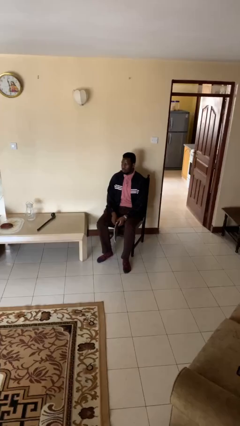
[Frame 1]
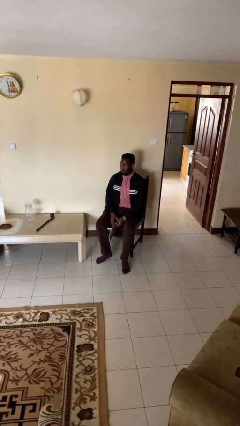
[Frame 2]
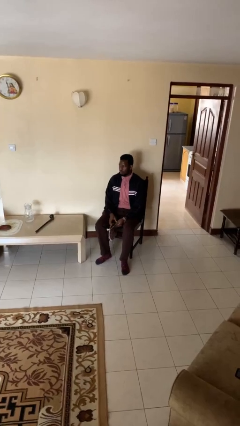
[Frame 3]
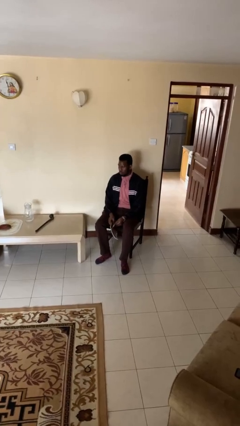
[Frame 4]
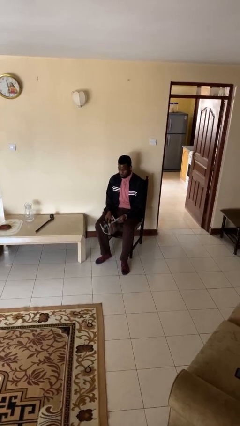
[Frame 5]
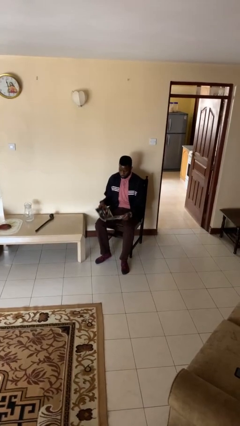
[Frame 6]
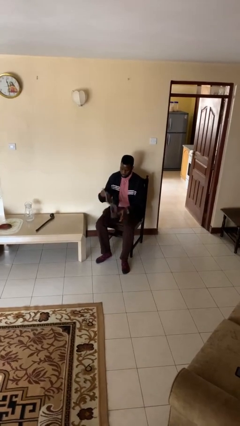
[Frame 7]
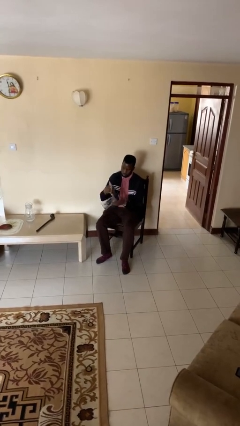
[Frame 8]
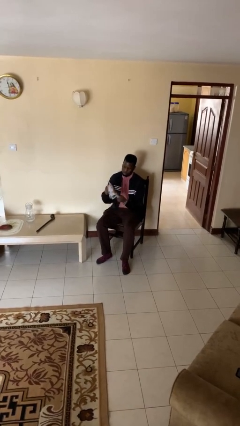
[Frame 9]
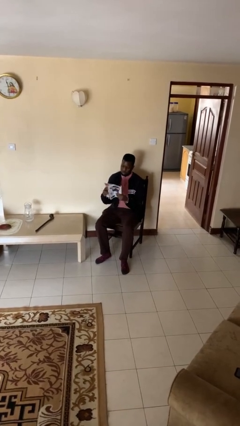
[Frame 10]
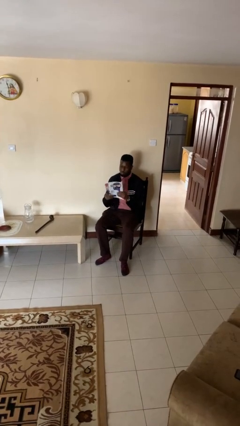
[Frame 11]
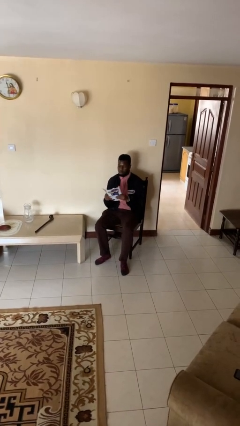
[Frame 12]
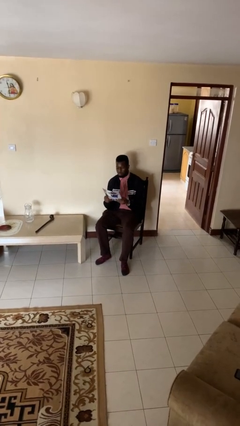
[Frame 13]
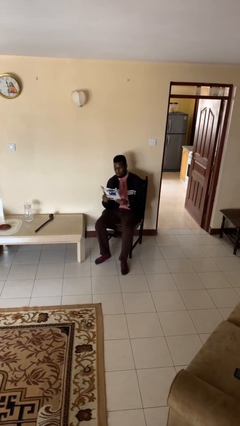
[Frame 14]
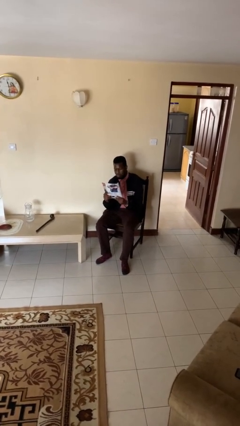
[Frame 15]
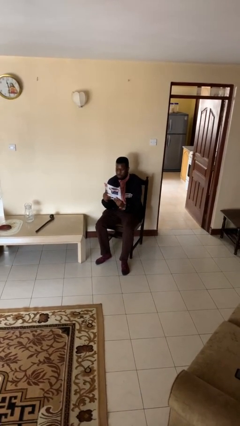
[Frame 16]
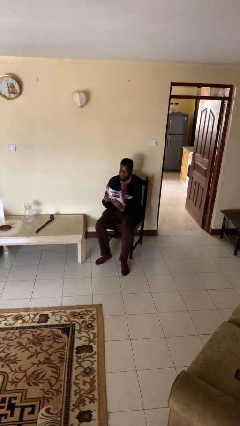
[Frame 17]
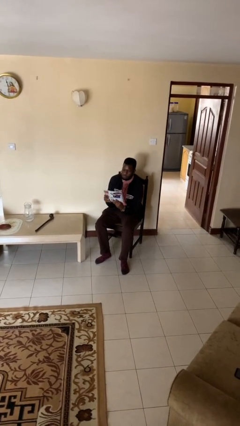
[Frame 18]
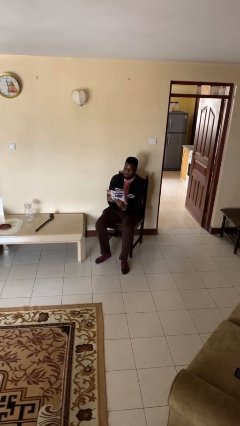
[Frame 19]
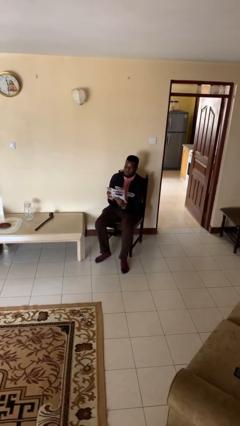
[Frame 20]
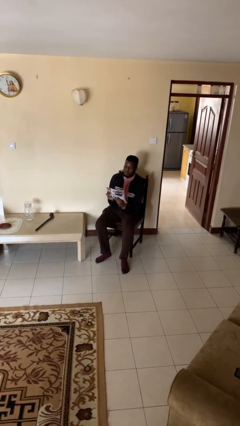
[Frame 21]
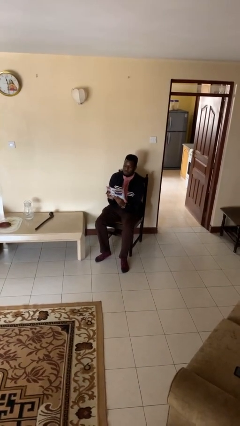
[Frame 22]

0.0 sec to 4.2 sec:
person reads document

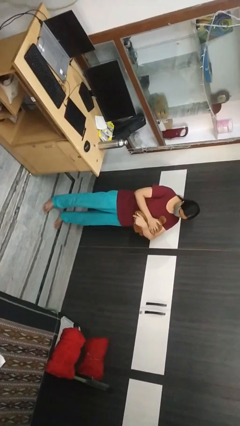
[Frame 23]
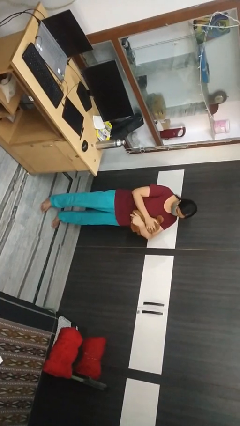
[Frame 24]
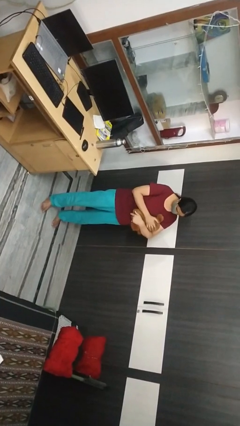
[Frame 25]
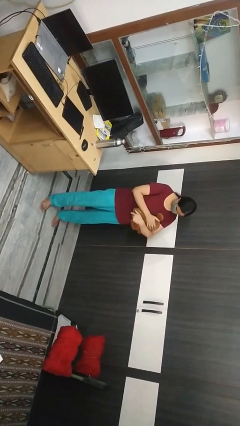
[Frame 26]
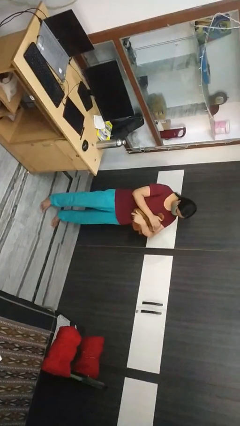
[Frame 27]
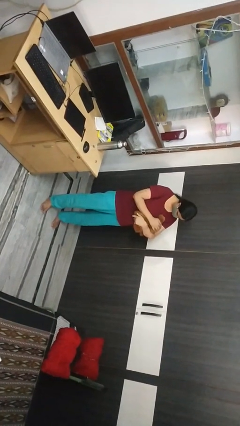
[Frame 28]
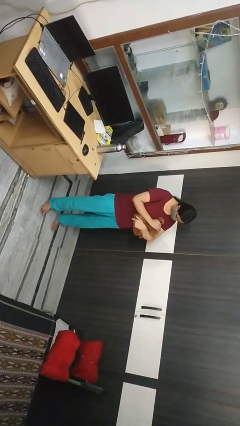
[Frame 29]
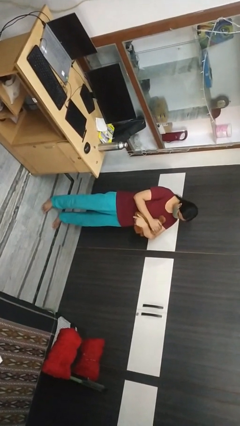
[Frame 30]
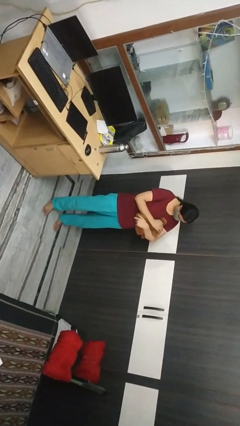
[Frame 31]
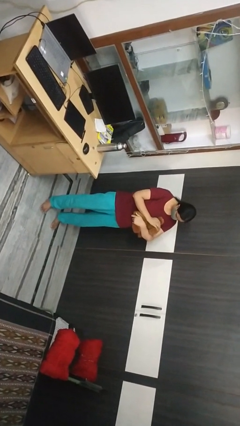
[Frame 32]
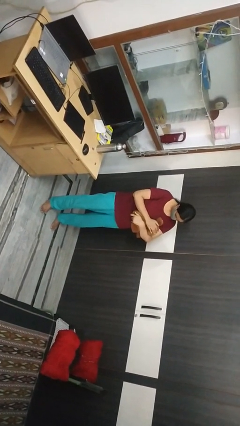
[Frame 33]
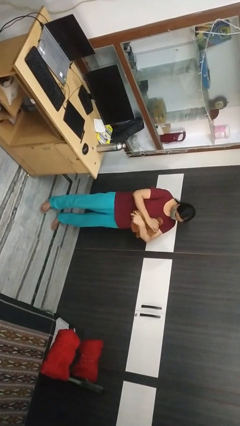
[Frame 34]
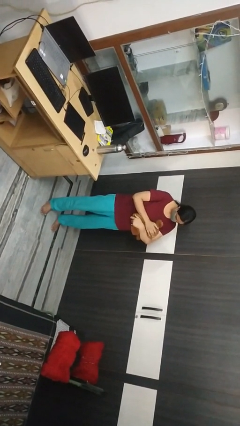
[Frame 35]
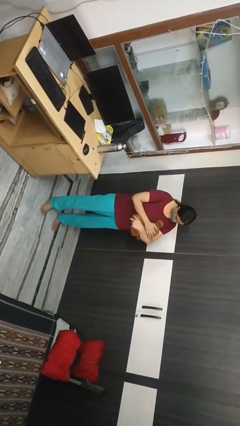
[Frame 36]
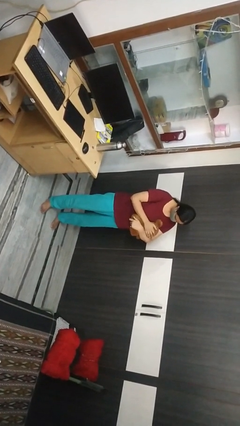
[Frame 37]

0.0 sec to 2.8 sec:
person pets cat

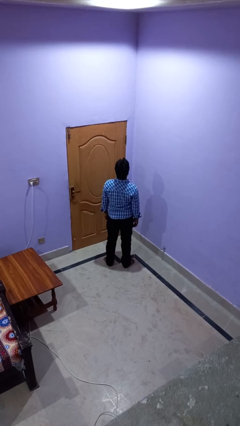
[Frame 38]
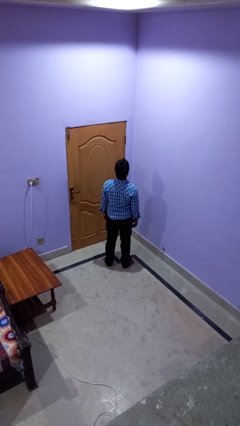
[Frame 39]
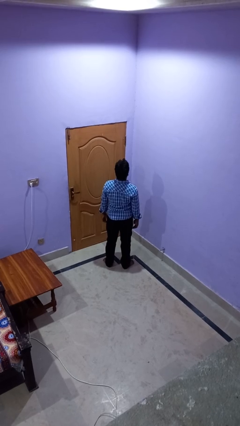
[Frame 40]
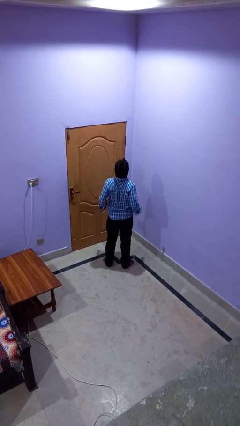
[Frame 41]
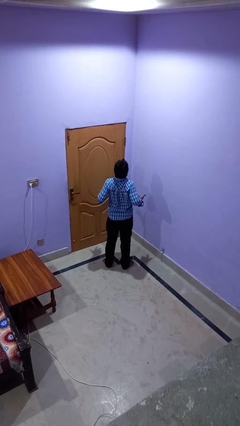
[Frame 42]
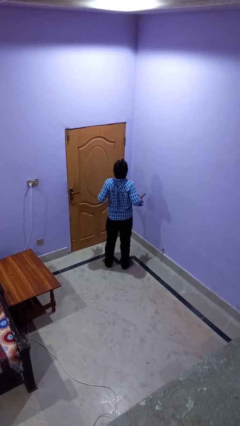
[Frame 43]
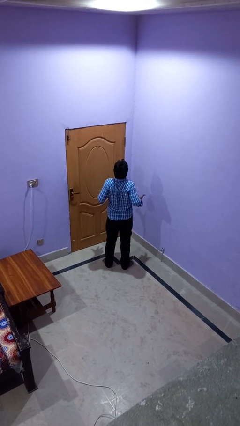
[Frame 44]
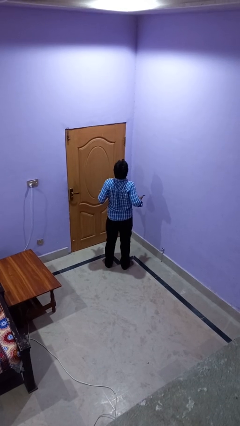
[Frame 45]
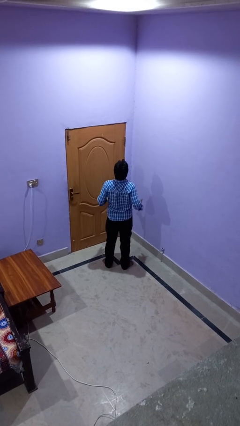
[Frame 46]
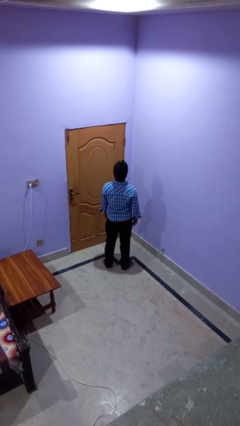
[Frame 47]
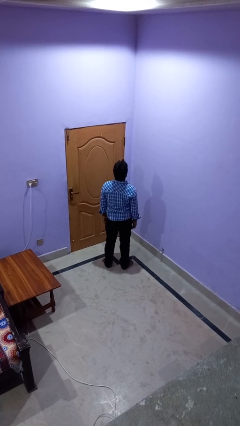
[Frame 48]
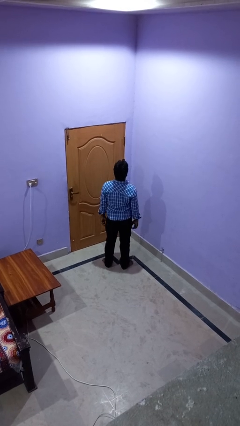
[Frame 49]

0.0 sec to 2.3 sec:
person shrugs

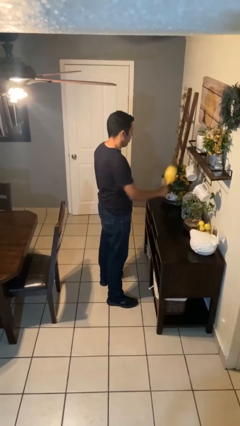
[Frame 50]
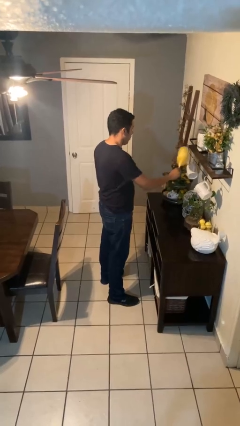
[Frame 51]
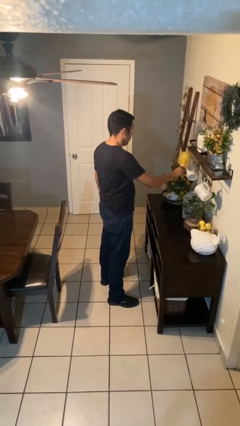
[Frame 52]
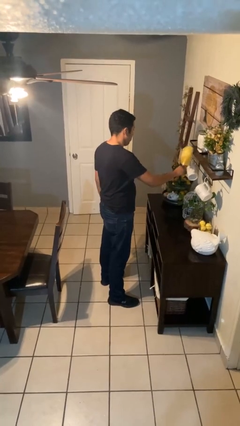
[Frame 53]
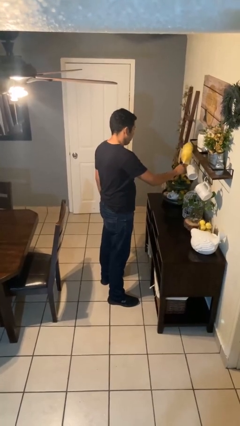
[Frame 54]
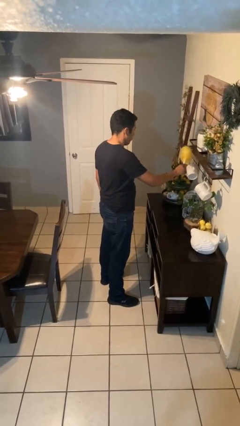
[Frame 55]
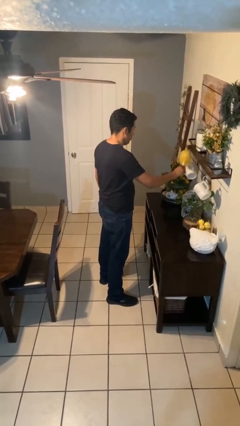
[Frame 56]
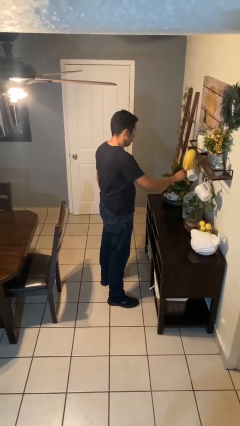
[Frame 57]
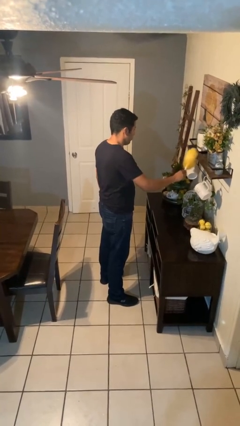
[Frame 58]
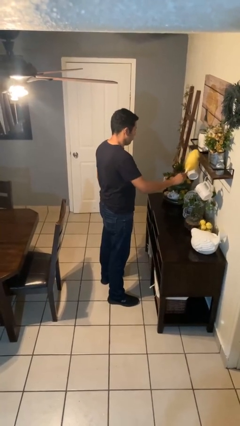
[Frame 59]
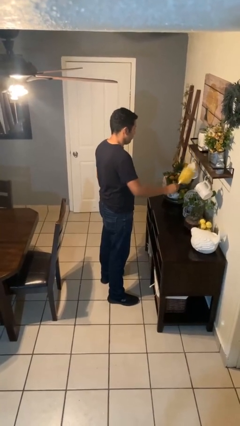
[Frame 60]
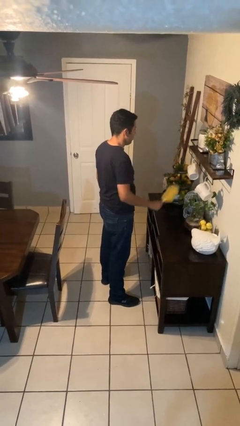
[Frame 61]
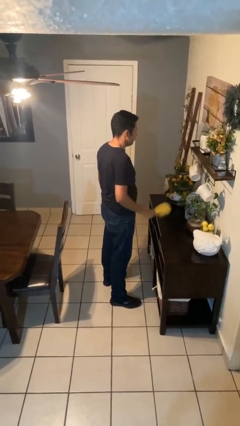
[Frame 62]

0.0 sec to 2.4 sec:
person dusts furniture

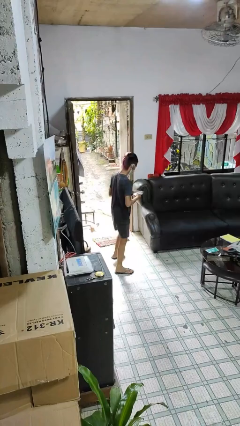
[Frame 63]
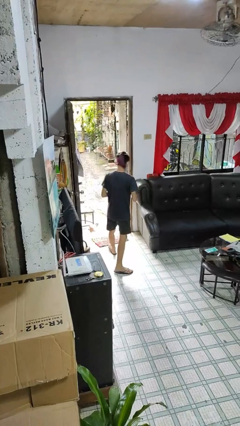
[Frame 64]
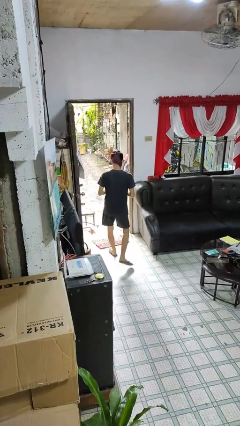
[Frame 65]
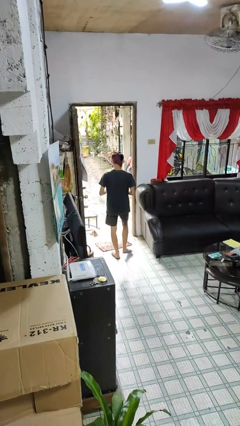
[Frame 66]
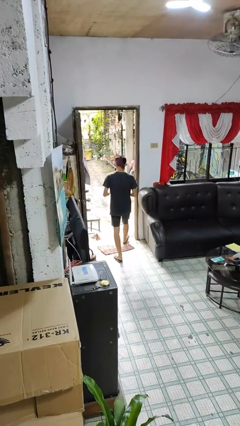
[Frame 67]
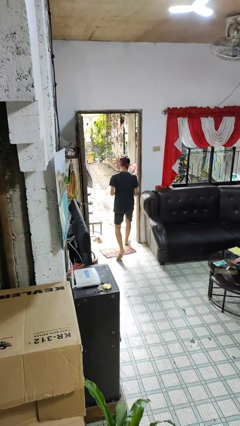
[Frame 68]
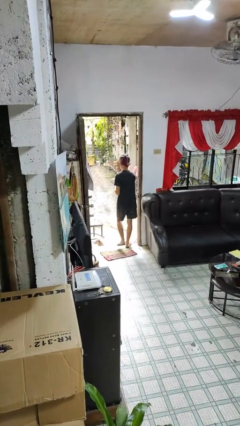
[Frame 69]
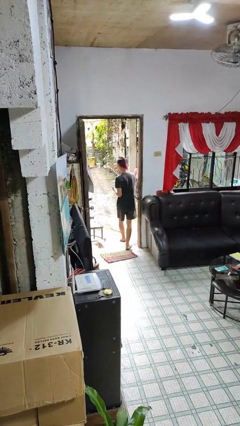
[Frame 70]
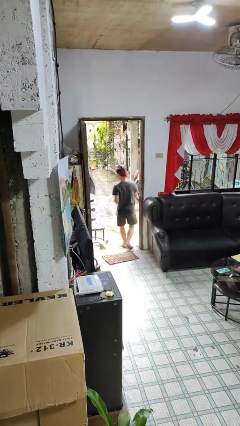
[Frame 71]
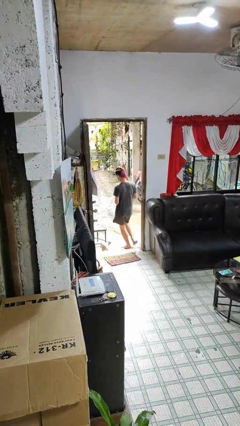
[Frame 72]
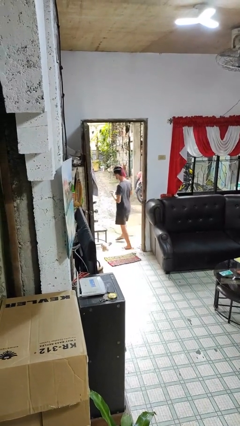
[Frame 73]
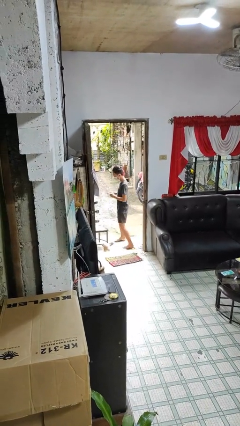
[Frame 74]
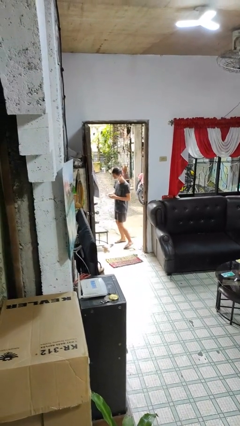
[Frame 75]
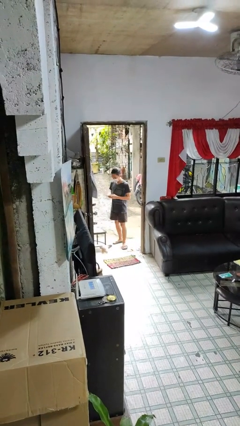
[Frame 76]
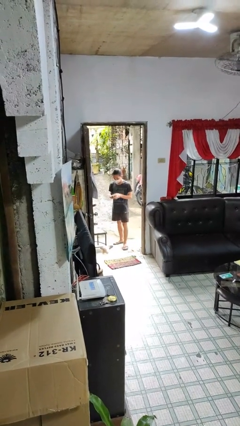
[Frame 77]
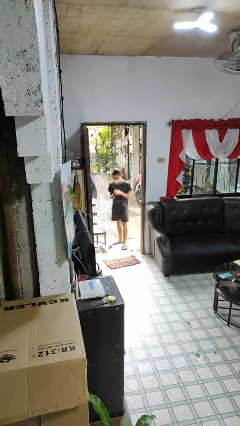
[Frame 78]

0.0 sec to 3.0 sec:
person exits scene through structure

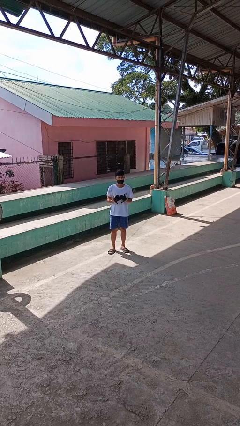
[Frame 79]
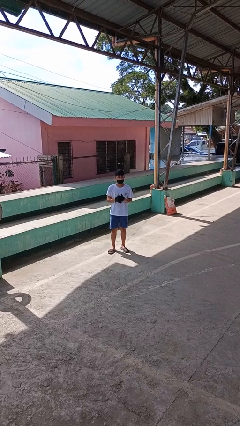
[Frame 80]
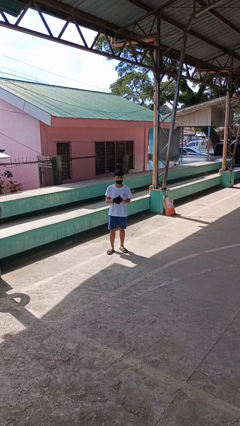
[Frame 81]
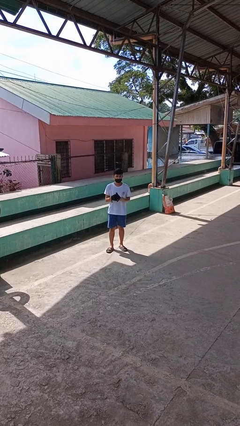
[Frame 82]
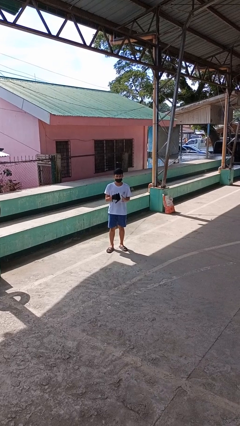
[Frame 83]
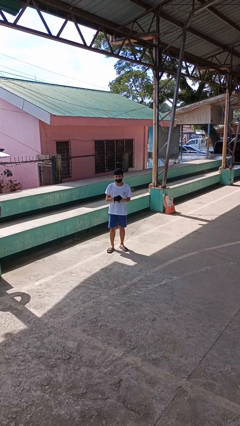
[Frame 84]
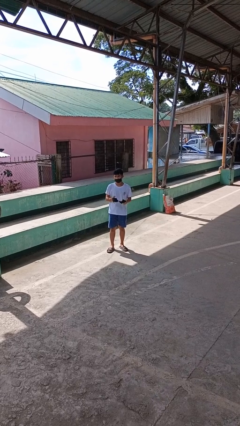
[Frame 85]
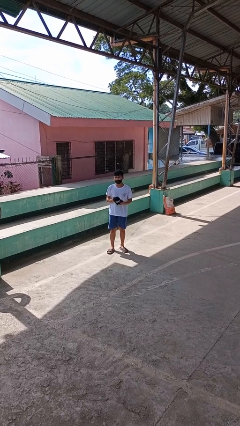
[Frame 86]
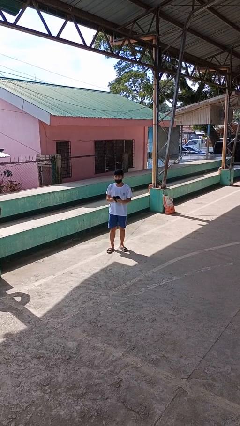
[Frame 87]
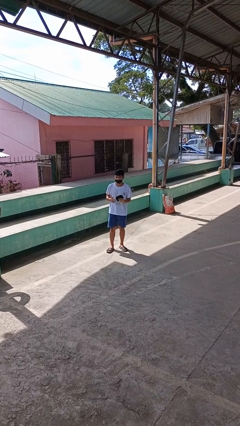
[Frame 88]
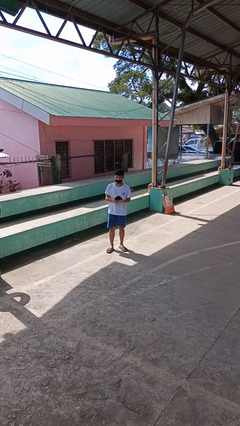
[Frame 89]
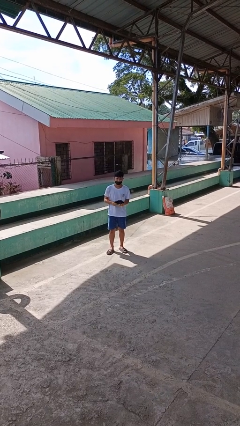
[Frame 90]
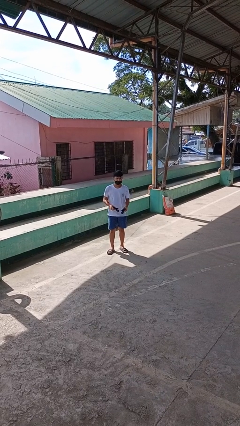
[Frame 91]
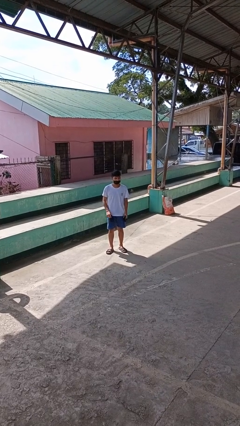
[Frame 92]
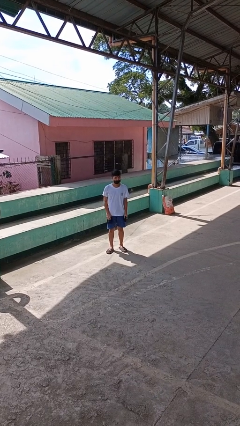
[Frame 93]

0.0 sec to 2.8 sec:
person takes off gloves
